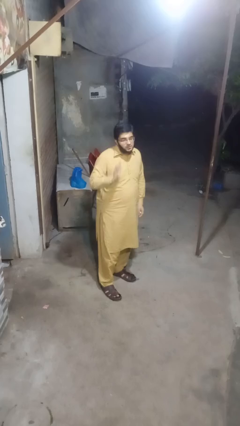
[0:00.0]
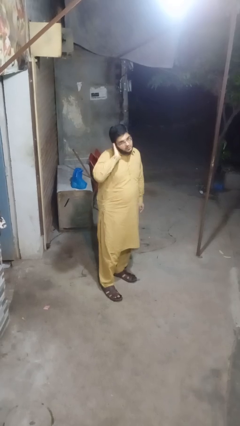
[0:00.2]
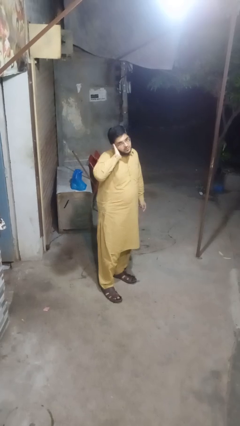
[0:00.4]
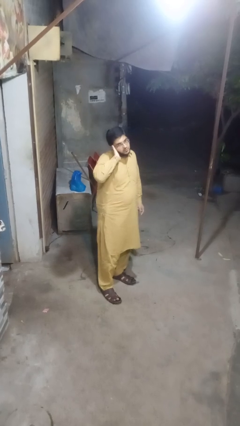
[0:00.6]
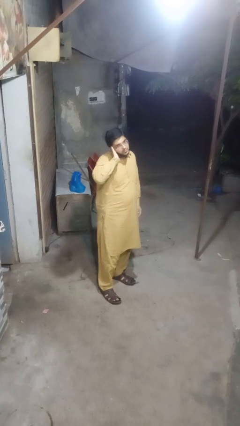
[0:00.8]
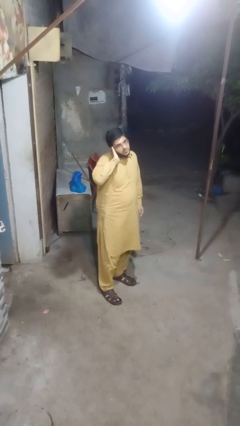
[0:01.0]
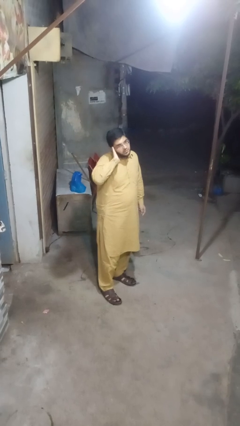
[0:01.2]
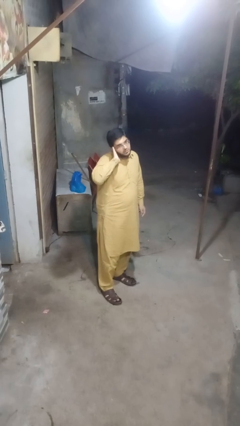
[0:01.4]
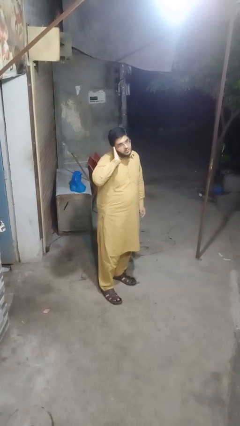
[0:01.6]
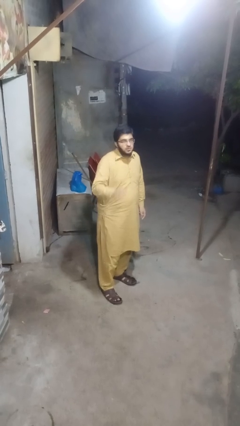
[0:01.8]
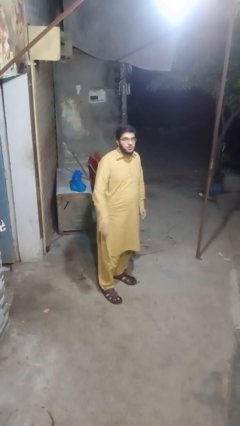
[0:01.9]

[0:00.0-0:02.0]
person gestures call me

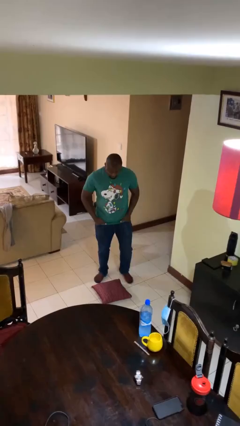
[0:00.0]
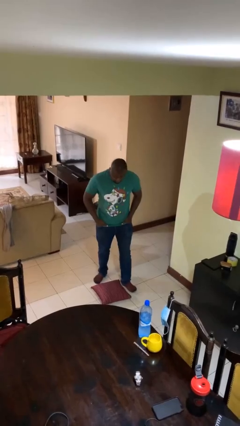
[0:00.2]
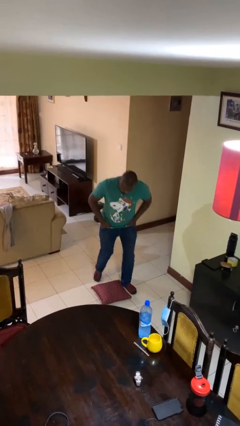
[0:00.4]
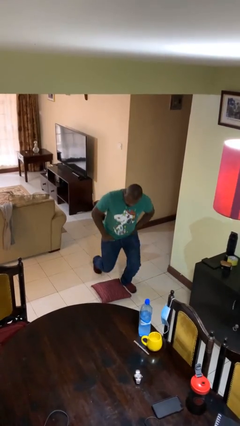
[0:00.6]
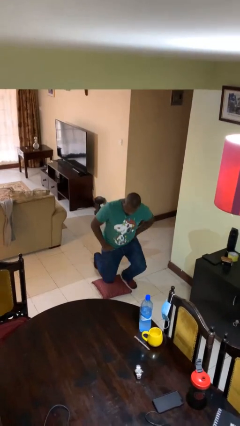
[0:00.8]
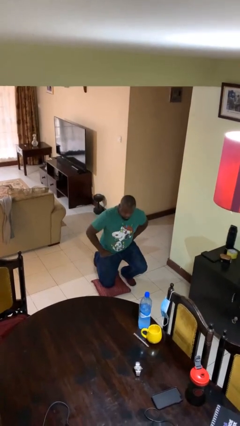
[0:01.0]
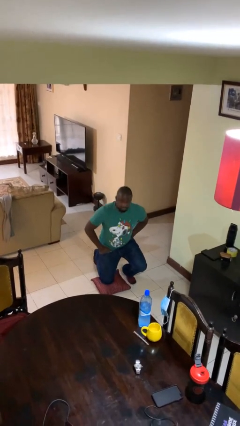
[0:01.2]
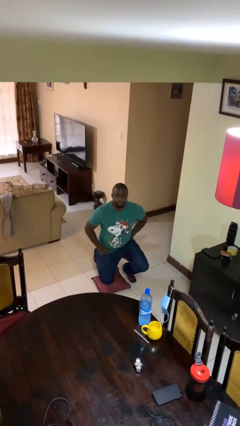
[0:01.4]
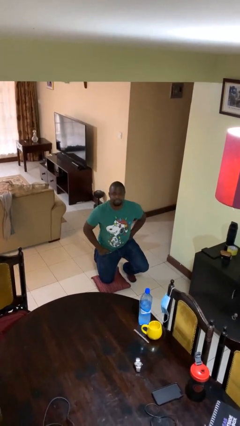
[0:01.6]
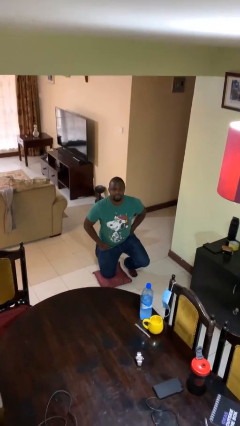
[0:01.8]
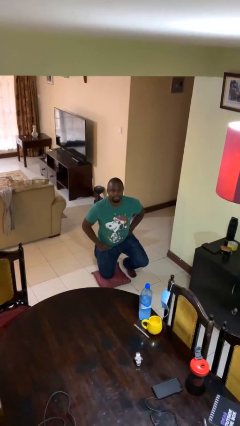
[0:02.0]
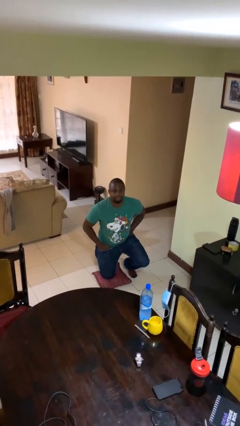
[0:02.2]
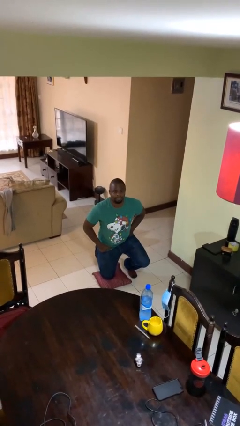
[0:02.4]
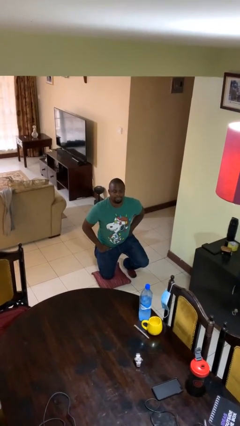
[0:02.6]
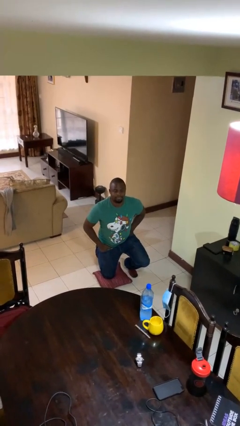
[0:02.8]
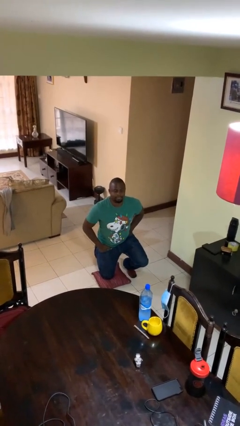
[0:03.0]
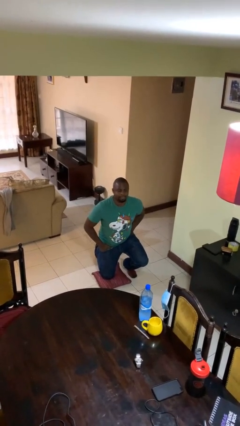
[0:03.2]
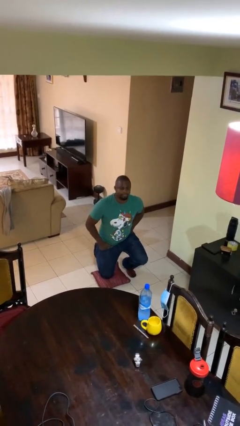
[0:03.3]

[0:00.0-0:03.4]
person kneels

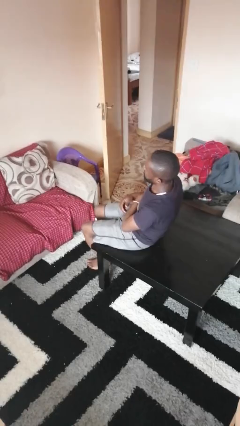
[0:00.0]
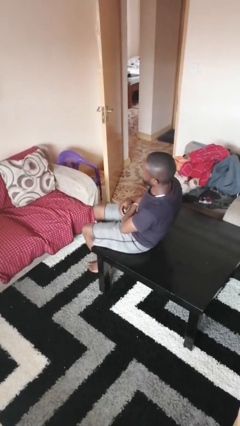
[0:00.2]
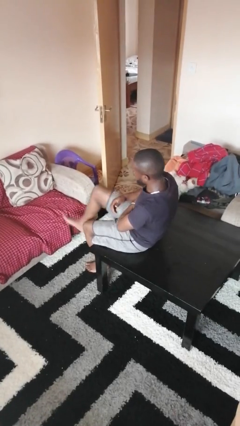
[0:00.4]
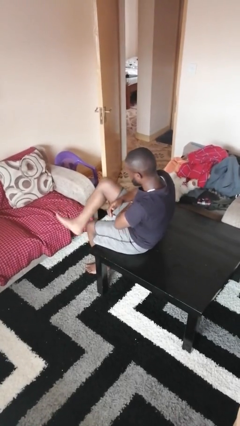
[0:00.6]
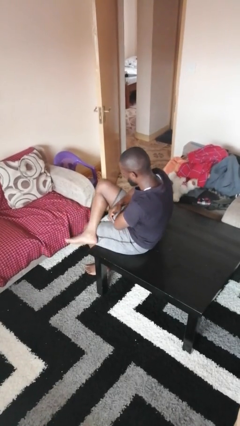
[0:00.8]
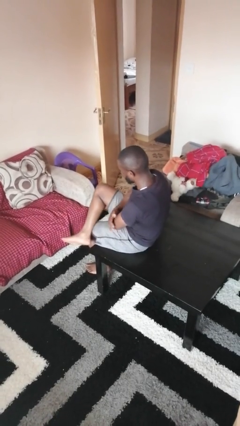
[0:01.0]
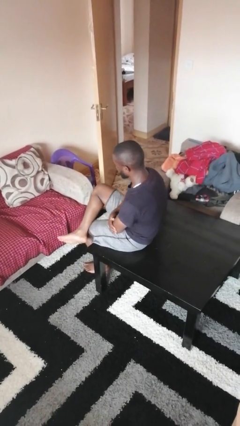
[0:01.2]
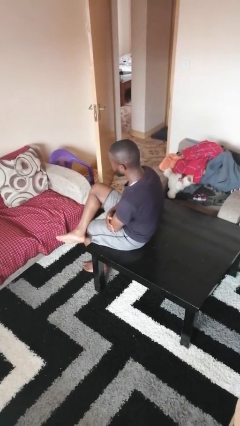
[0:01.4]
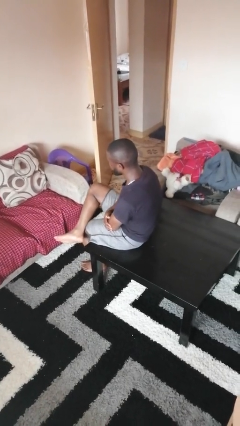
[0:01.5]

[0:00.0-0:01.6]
person crosses legs

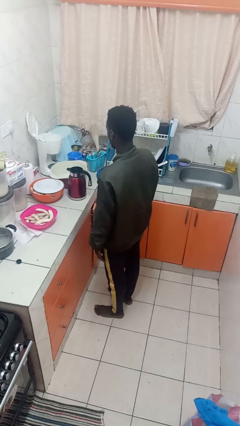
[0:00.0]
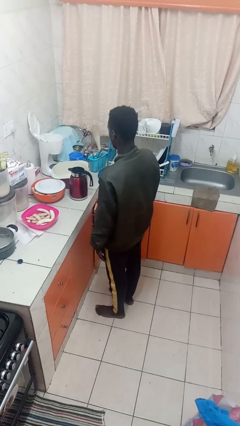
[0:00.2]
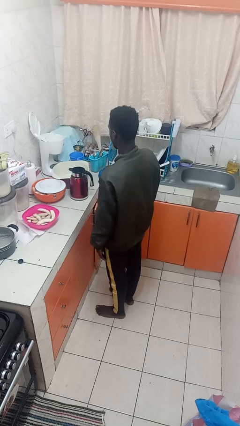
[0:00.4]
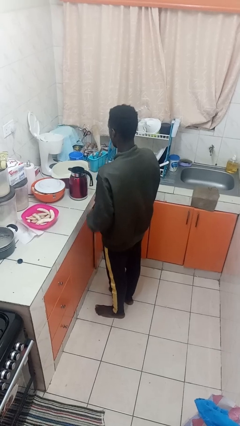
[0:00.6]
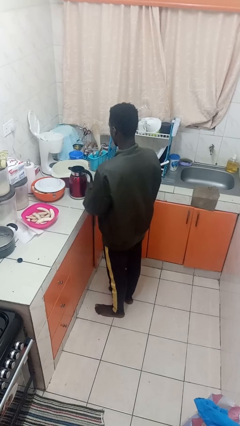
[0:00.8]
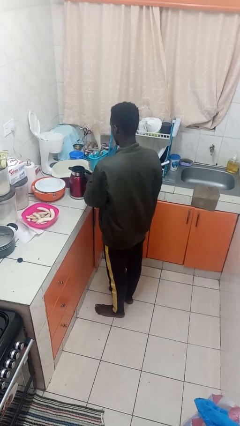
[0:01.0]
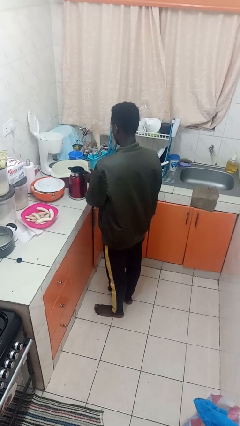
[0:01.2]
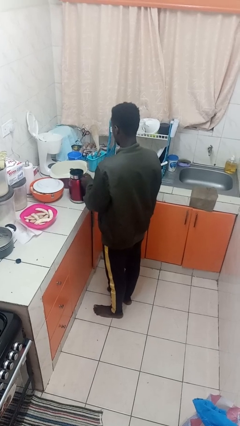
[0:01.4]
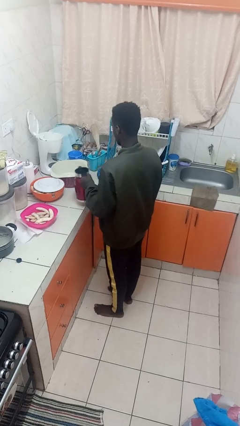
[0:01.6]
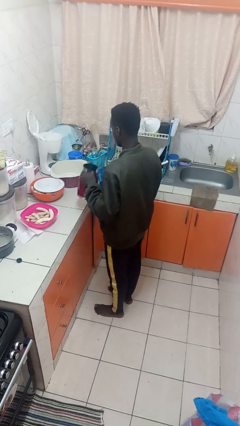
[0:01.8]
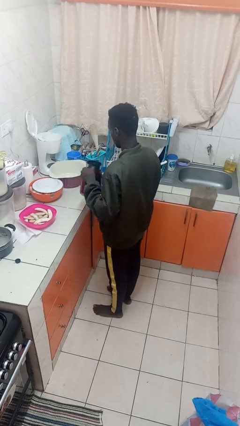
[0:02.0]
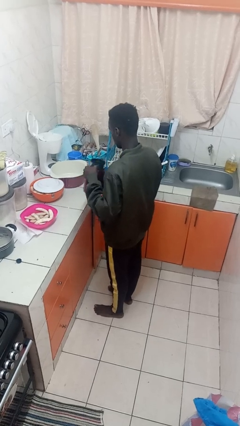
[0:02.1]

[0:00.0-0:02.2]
person picks up object from countertop

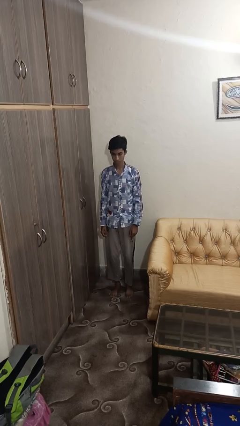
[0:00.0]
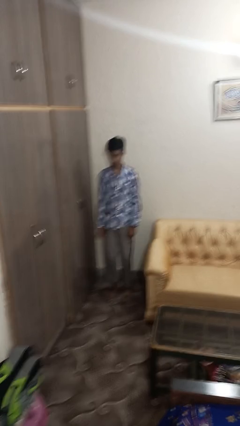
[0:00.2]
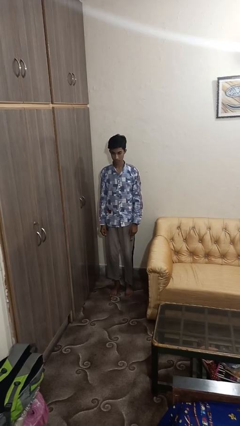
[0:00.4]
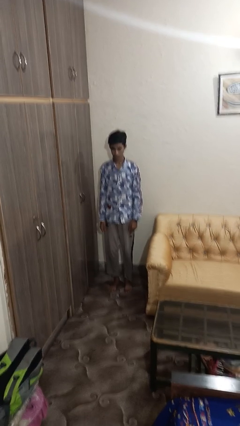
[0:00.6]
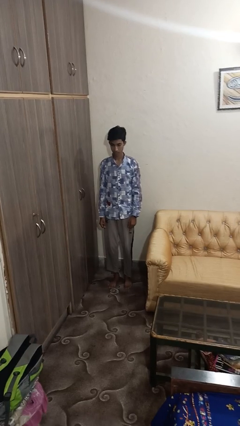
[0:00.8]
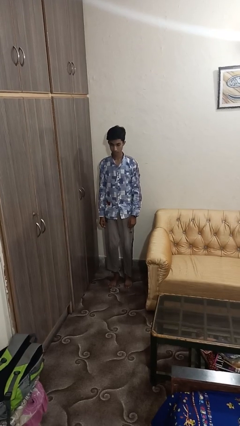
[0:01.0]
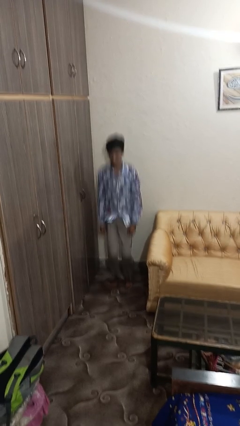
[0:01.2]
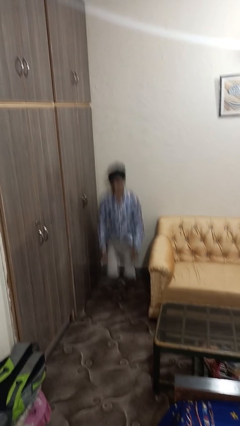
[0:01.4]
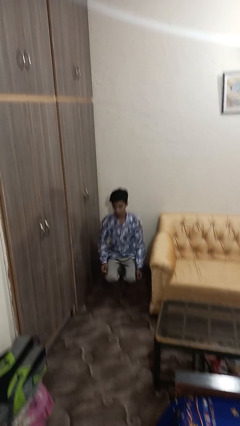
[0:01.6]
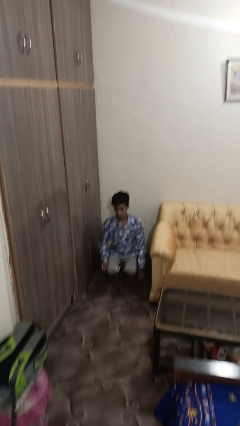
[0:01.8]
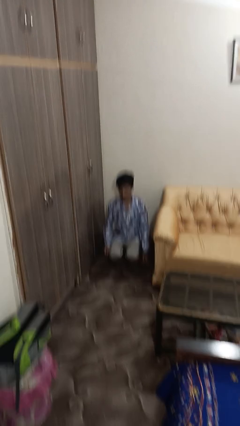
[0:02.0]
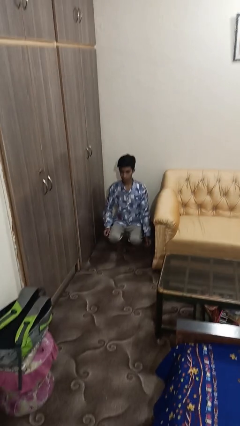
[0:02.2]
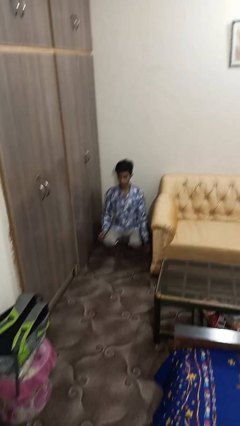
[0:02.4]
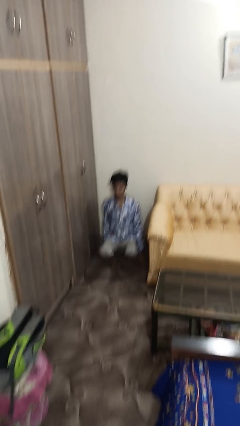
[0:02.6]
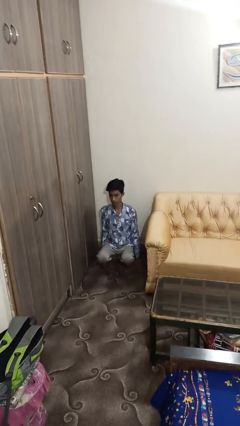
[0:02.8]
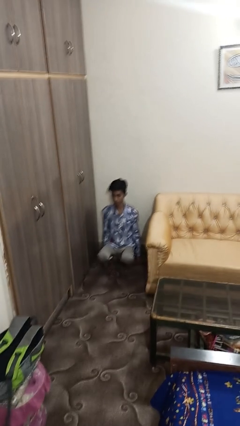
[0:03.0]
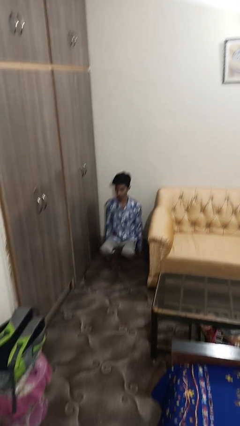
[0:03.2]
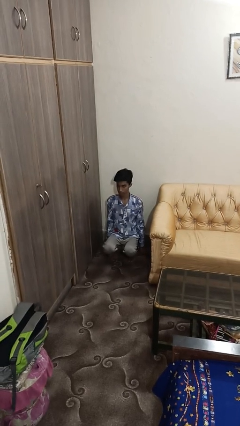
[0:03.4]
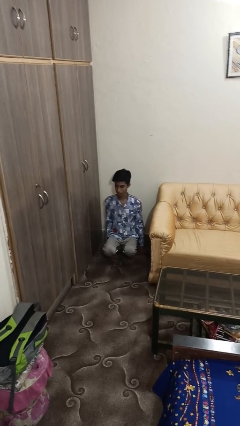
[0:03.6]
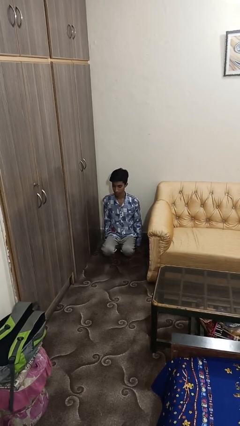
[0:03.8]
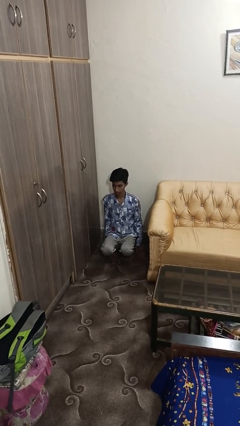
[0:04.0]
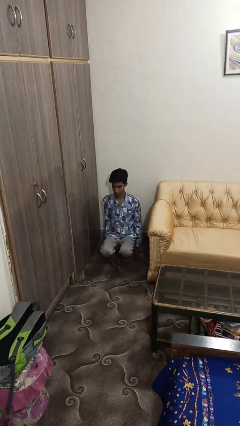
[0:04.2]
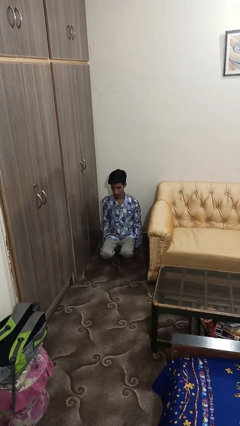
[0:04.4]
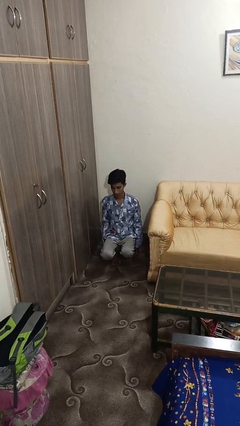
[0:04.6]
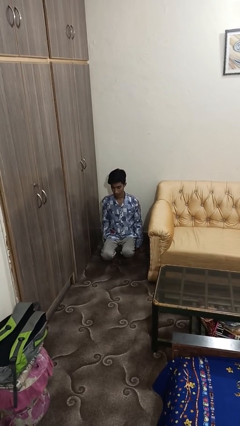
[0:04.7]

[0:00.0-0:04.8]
person squats

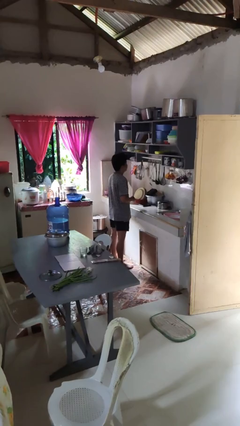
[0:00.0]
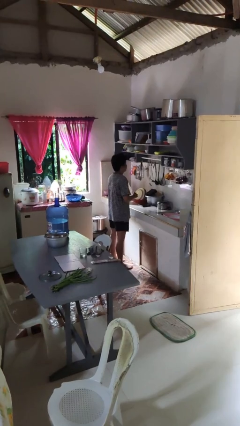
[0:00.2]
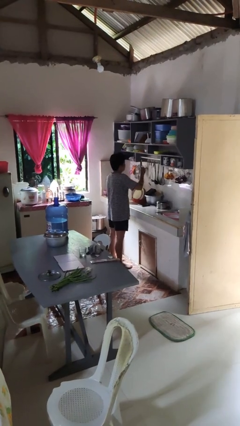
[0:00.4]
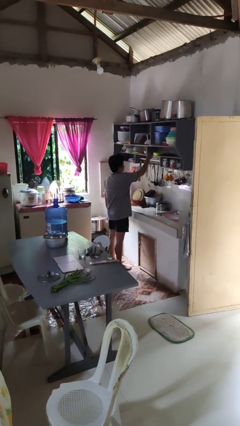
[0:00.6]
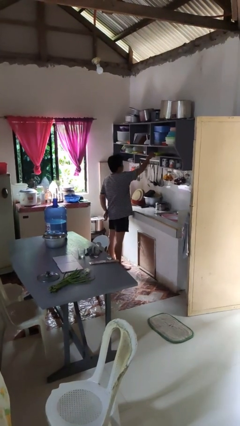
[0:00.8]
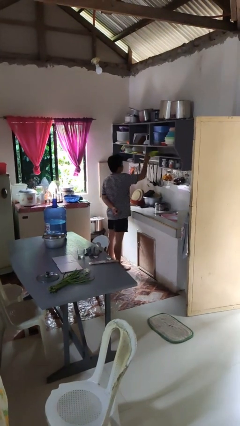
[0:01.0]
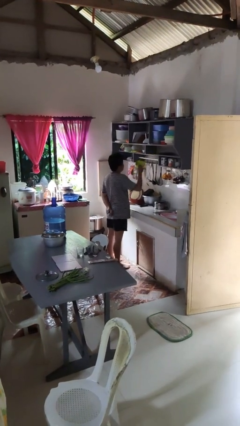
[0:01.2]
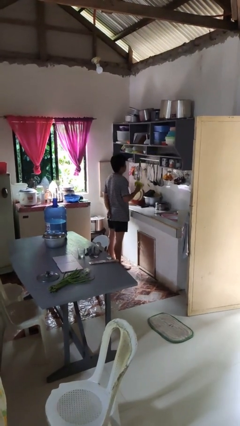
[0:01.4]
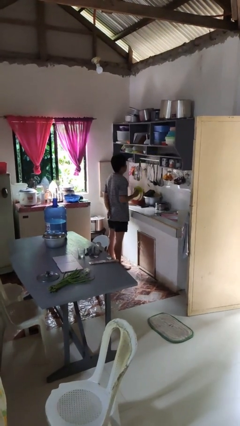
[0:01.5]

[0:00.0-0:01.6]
person takes object from cabinet

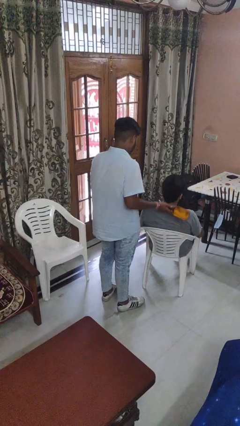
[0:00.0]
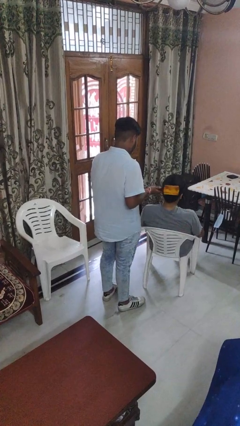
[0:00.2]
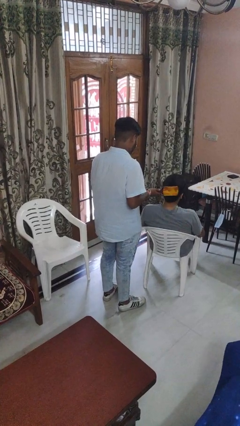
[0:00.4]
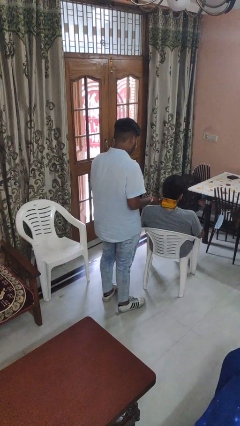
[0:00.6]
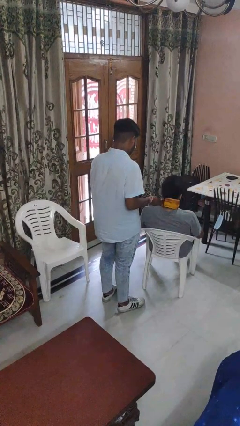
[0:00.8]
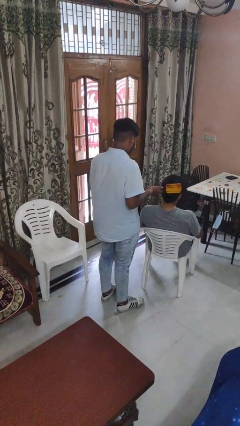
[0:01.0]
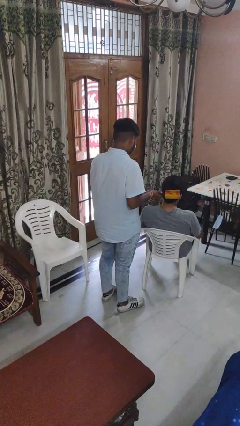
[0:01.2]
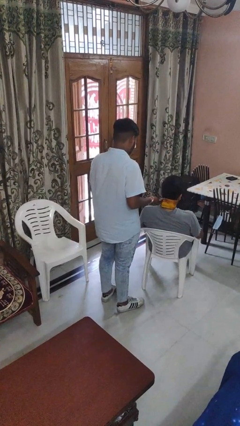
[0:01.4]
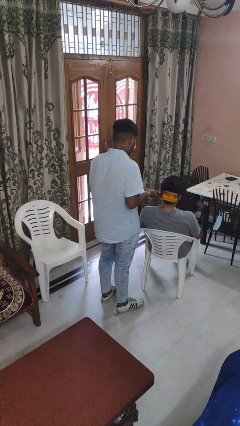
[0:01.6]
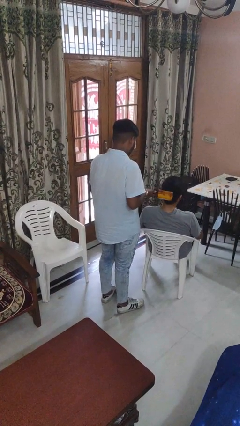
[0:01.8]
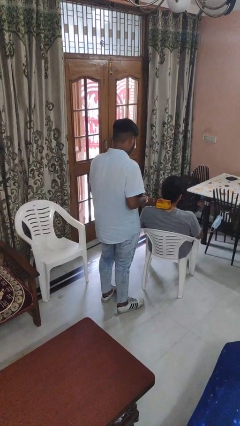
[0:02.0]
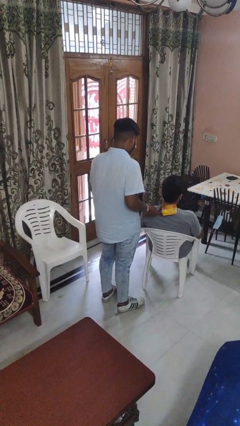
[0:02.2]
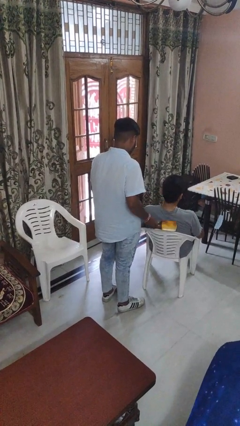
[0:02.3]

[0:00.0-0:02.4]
person brushes hair of person
